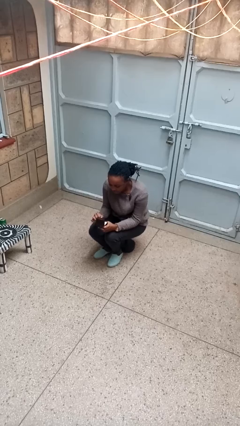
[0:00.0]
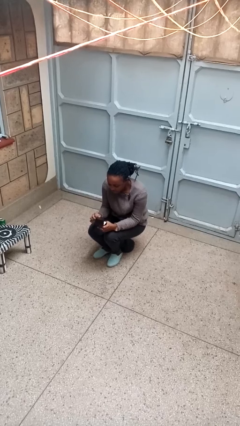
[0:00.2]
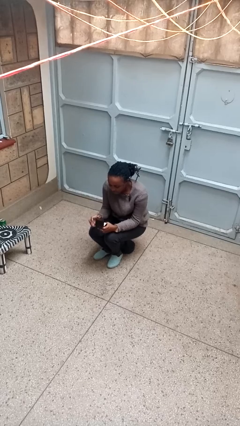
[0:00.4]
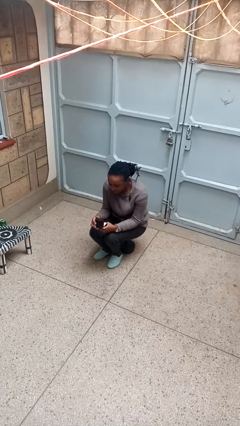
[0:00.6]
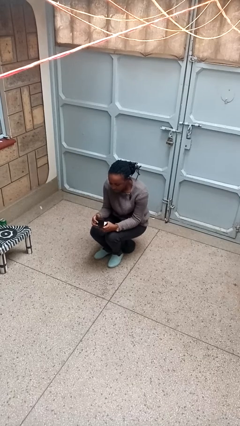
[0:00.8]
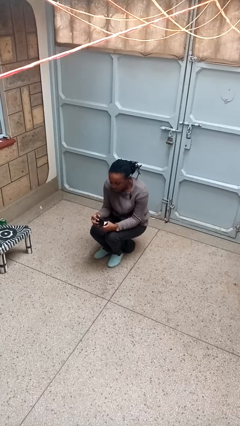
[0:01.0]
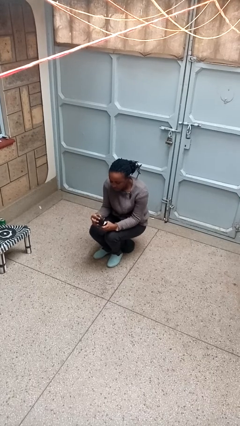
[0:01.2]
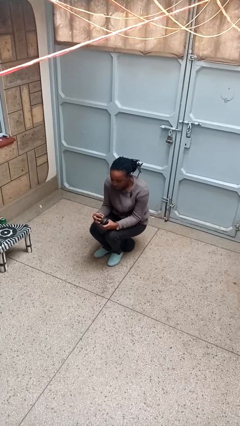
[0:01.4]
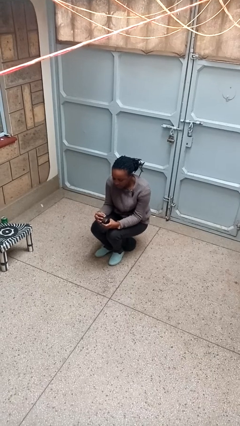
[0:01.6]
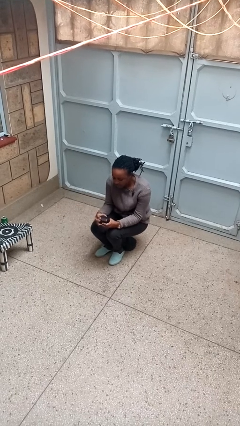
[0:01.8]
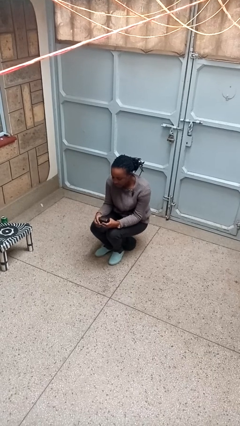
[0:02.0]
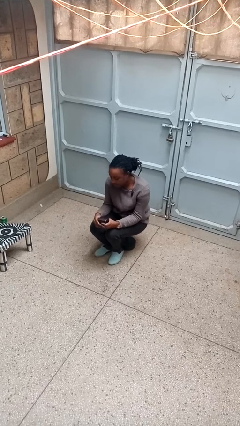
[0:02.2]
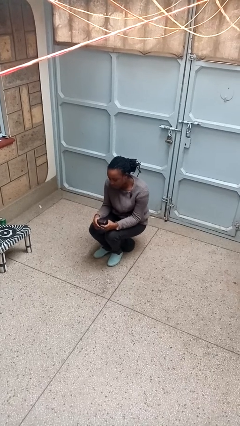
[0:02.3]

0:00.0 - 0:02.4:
person closes jewelry box

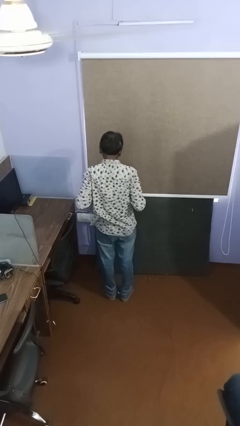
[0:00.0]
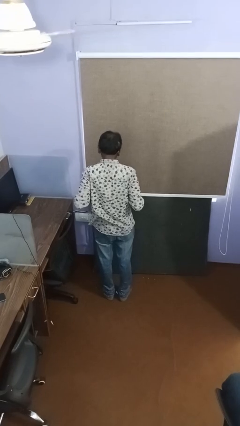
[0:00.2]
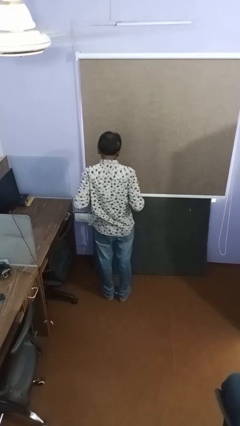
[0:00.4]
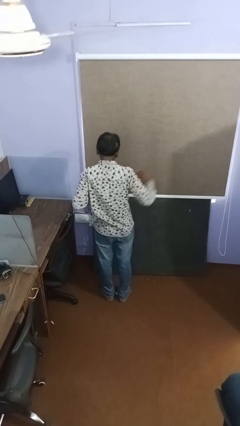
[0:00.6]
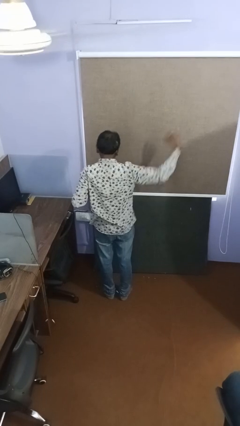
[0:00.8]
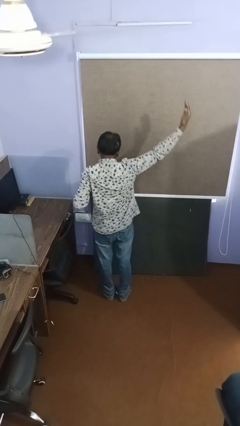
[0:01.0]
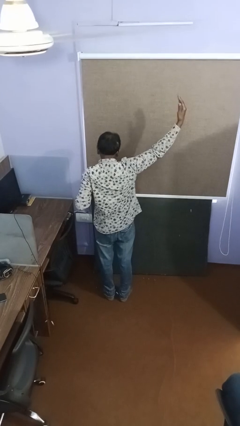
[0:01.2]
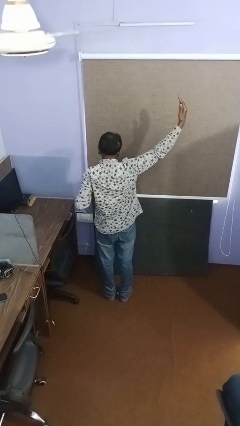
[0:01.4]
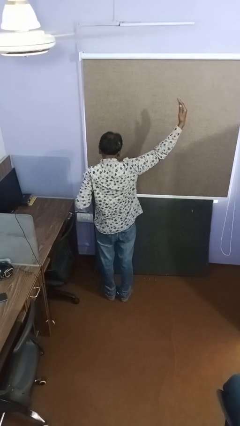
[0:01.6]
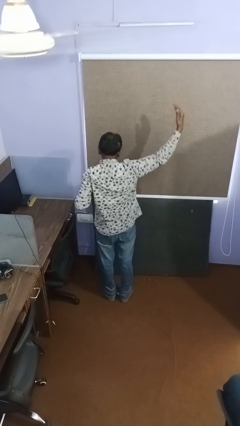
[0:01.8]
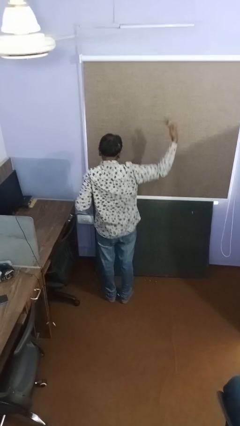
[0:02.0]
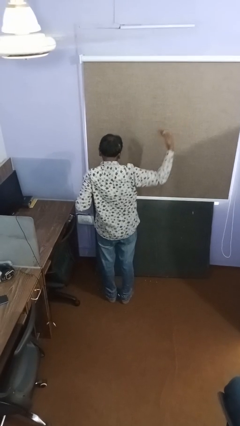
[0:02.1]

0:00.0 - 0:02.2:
person gestures swipe right

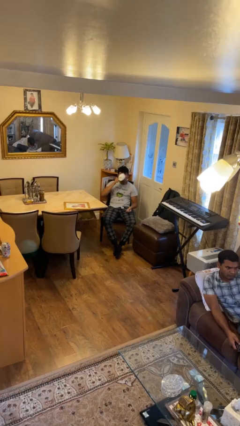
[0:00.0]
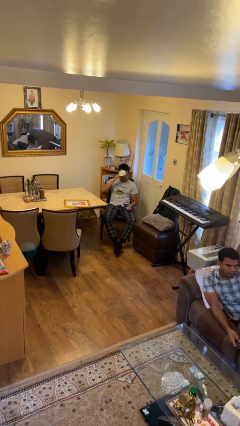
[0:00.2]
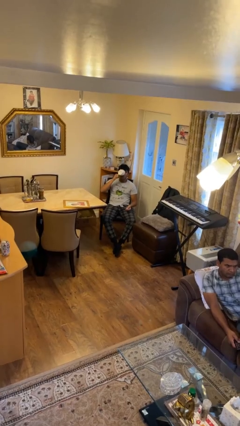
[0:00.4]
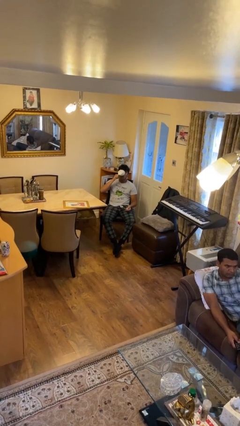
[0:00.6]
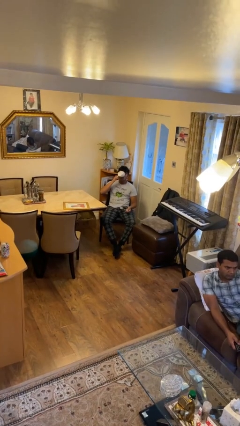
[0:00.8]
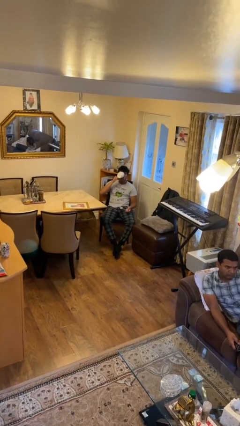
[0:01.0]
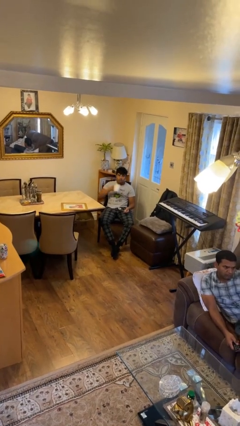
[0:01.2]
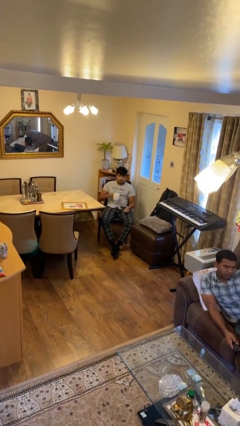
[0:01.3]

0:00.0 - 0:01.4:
person drinks from mug

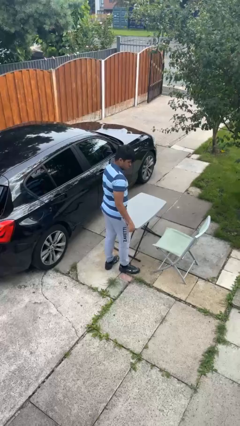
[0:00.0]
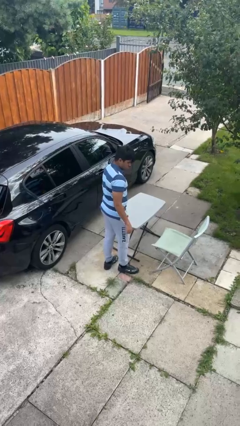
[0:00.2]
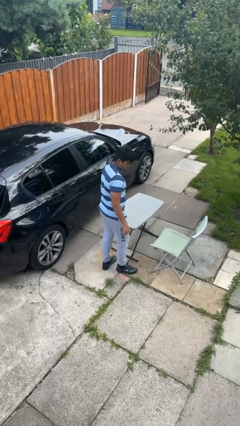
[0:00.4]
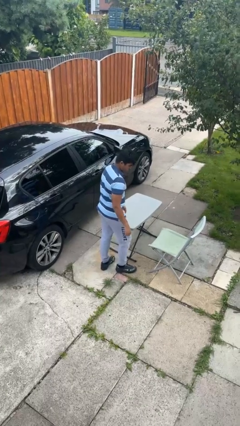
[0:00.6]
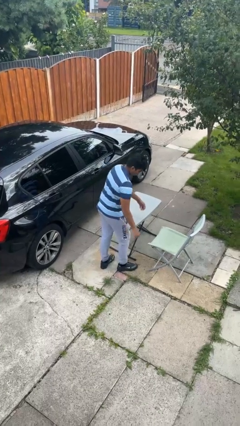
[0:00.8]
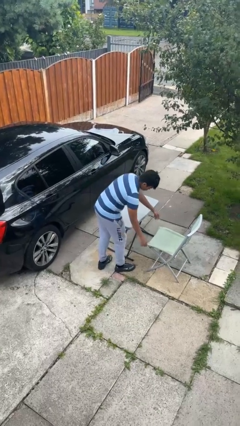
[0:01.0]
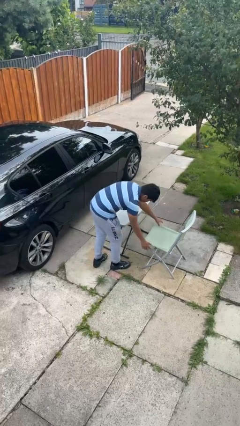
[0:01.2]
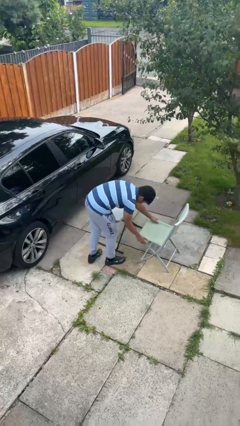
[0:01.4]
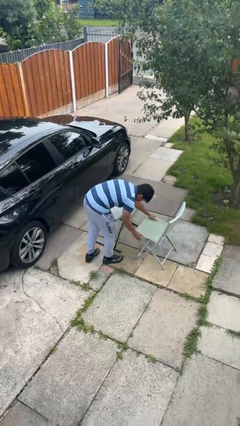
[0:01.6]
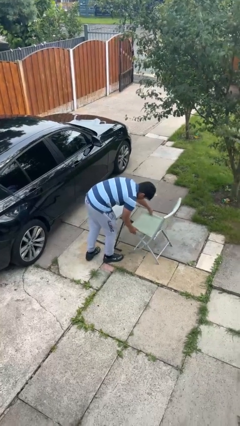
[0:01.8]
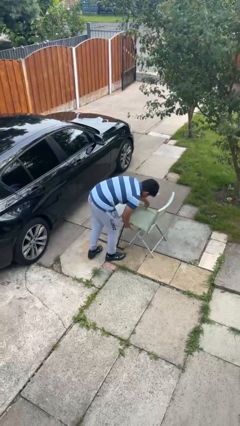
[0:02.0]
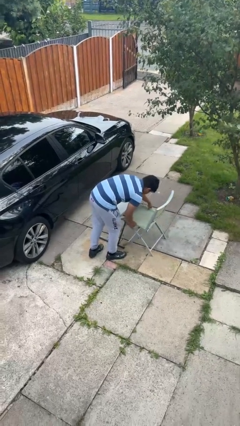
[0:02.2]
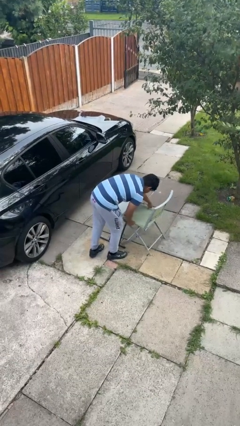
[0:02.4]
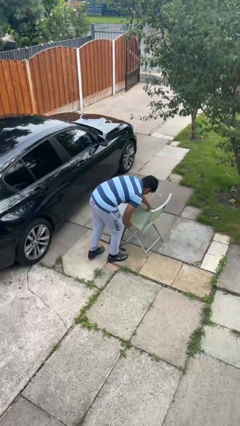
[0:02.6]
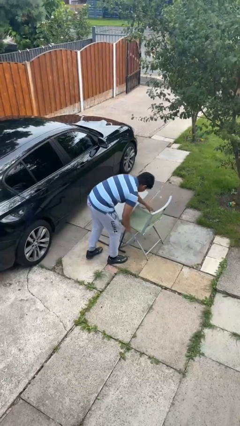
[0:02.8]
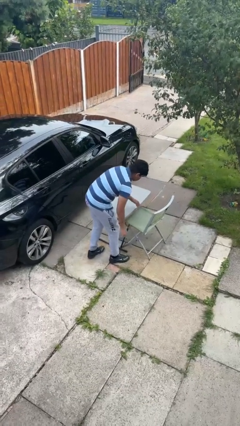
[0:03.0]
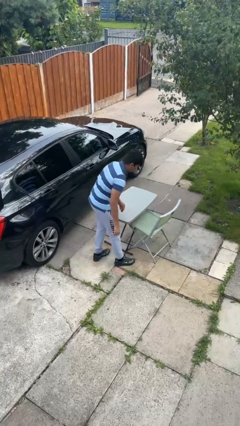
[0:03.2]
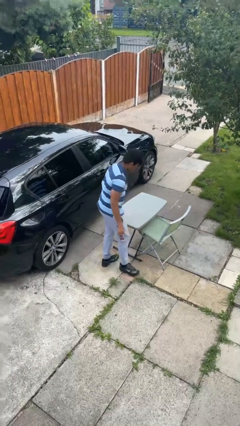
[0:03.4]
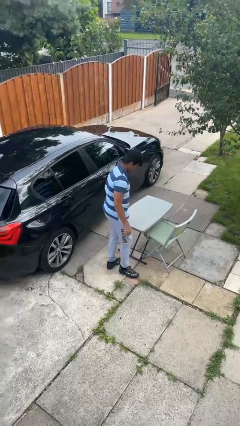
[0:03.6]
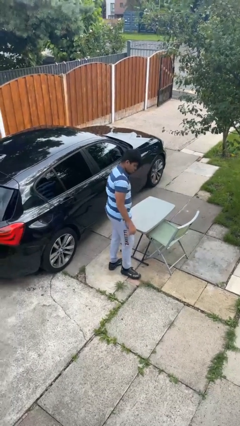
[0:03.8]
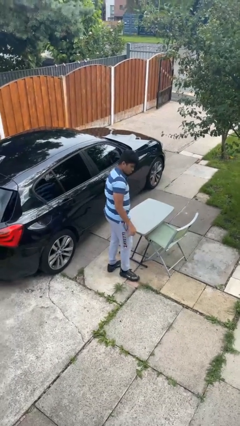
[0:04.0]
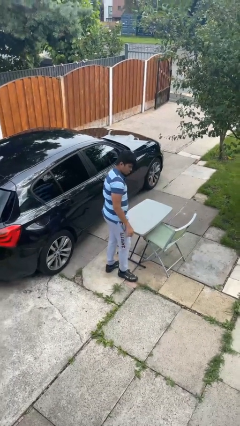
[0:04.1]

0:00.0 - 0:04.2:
person pushes in chair

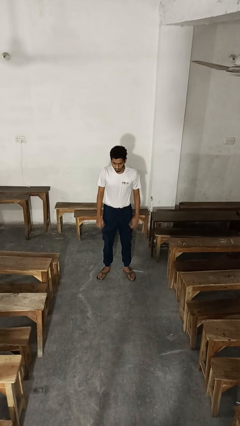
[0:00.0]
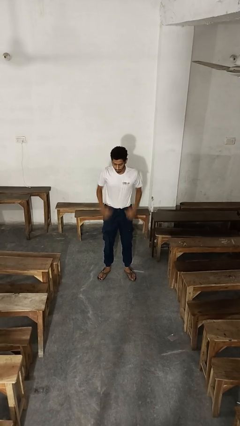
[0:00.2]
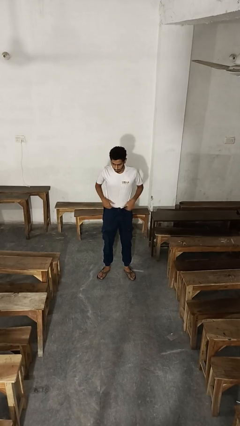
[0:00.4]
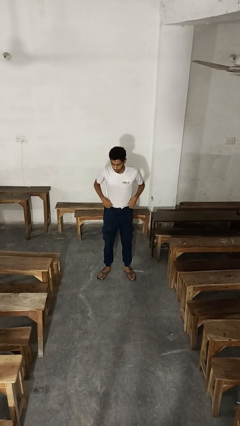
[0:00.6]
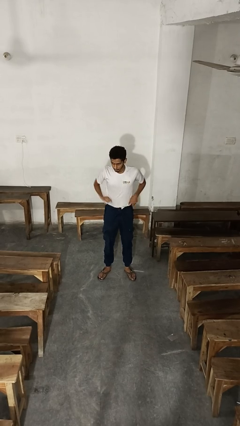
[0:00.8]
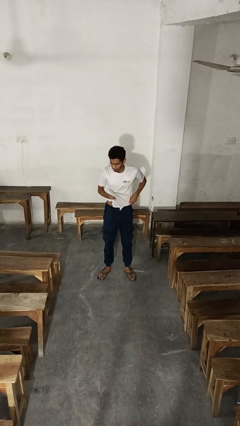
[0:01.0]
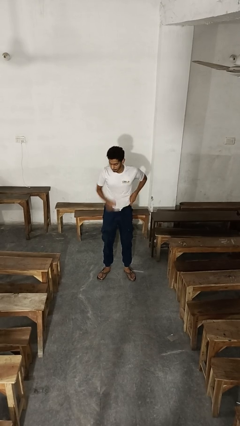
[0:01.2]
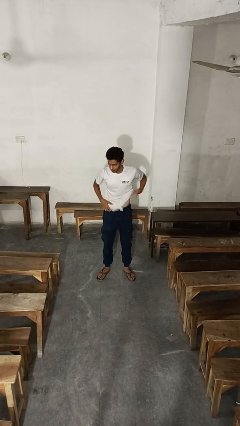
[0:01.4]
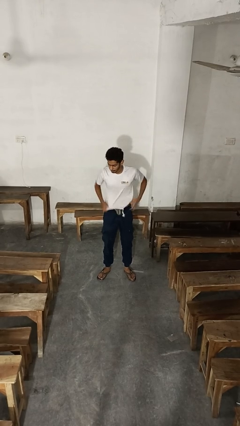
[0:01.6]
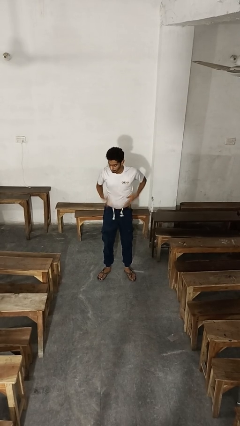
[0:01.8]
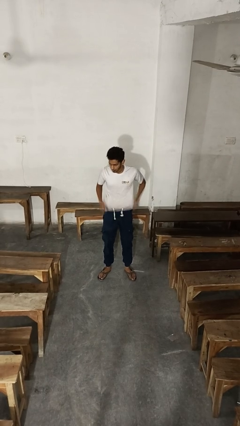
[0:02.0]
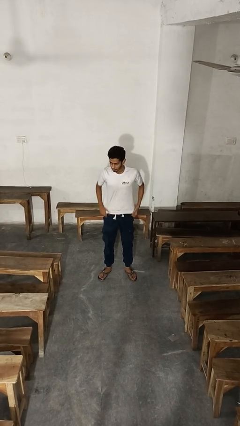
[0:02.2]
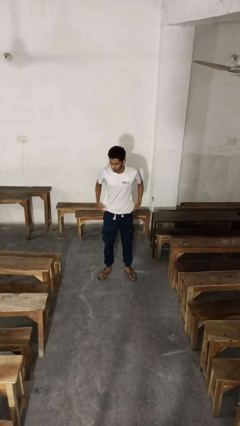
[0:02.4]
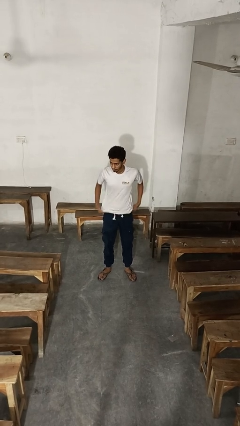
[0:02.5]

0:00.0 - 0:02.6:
person untucks shirt

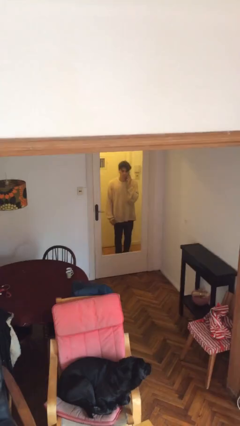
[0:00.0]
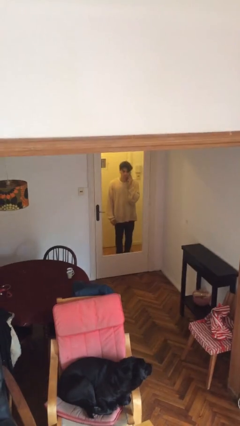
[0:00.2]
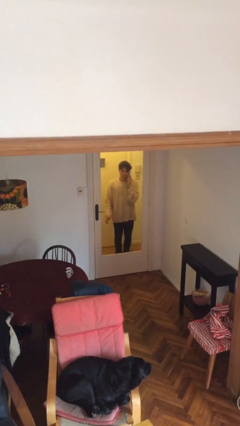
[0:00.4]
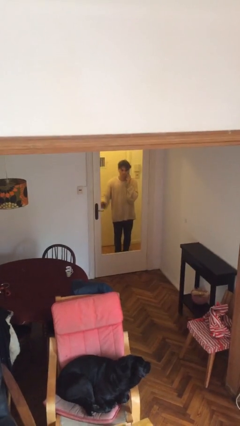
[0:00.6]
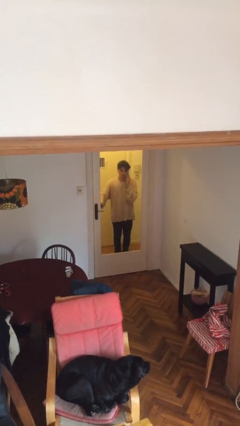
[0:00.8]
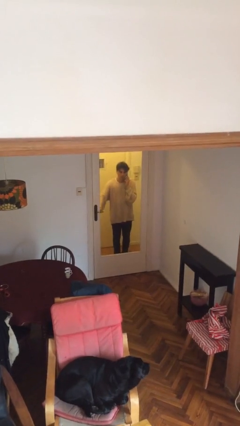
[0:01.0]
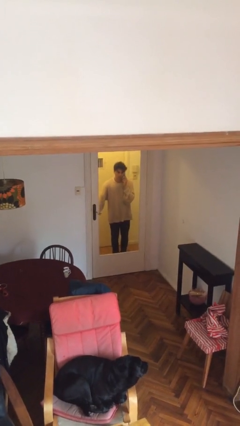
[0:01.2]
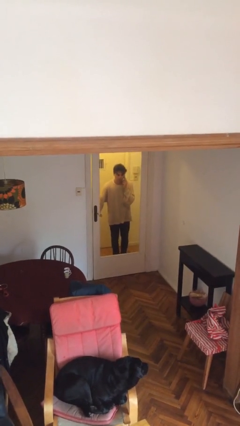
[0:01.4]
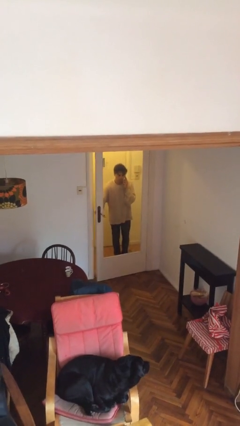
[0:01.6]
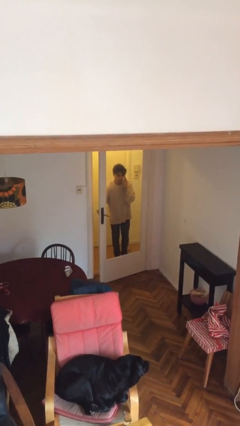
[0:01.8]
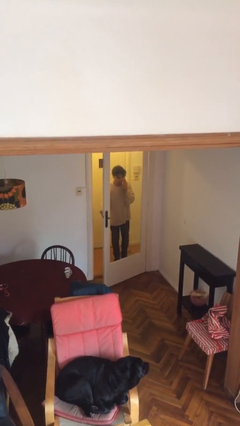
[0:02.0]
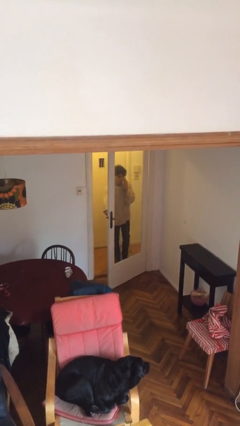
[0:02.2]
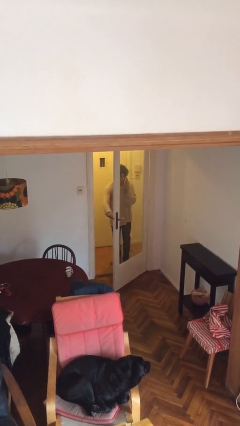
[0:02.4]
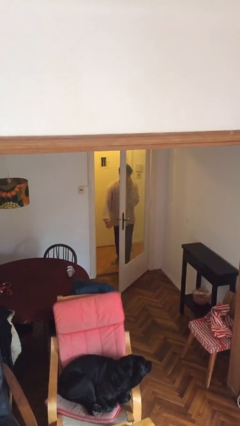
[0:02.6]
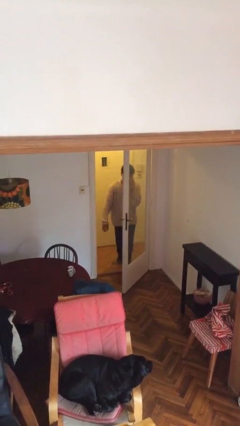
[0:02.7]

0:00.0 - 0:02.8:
person opens facility door

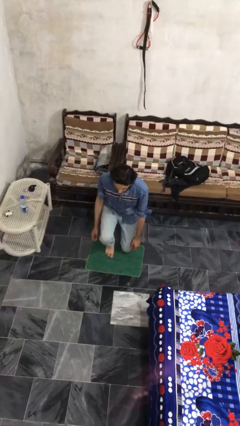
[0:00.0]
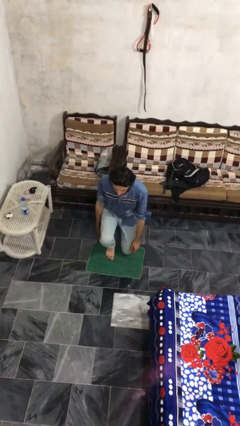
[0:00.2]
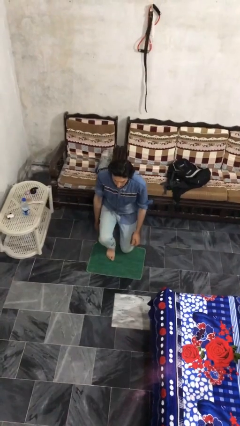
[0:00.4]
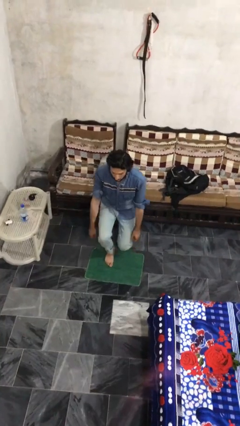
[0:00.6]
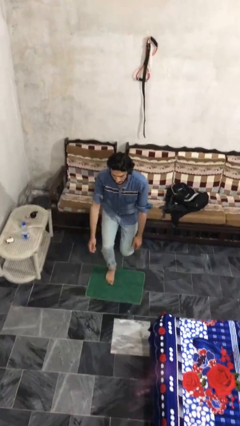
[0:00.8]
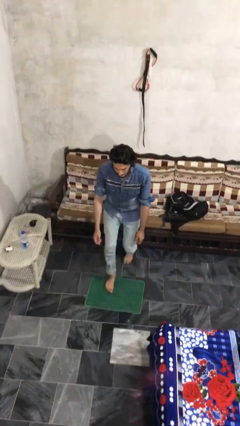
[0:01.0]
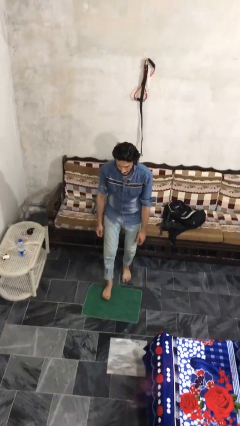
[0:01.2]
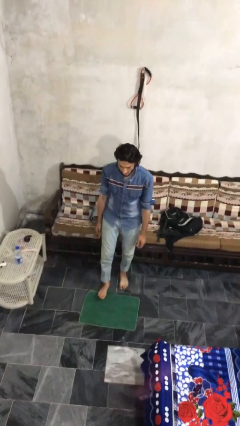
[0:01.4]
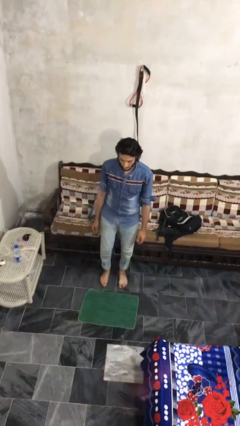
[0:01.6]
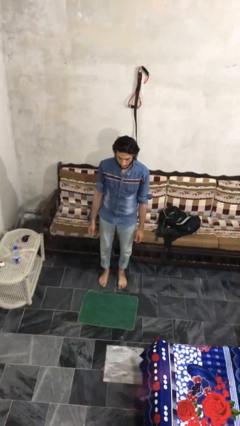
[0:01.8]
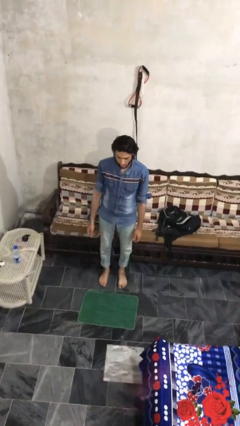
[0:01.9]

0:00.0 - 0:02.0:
person stands up from floor
